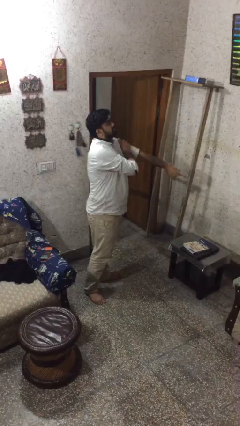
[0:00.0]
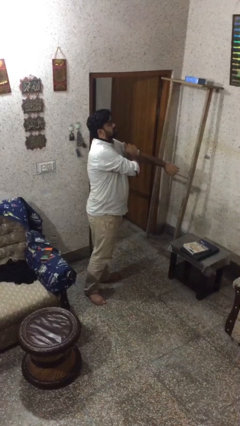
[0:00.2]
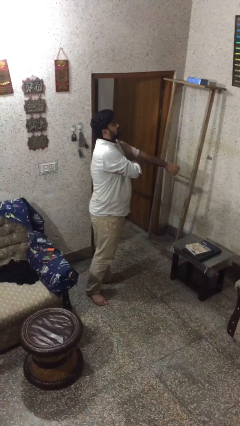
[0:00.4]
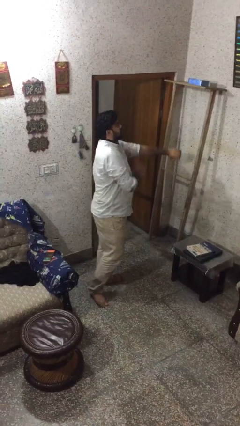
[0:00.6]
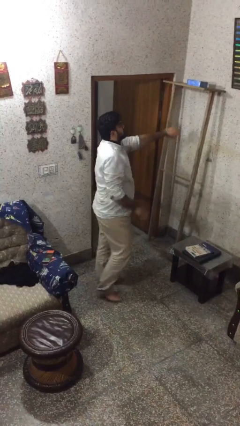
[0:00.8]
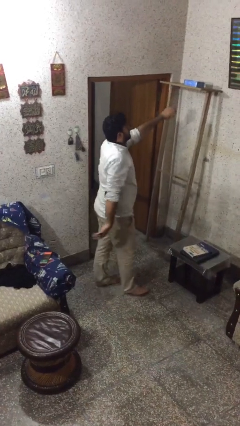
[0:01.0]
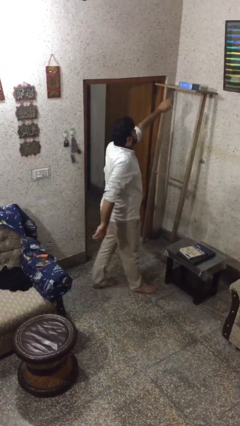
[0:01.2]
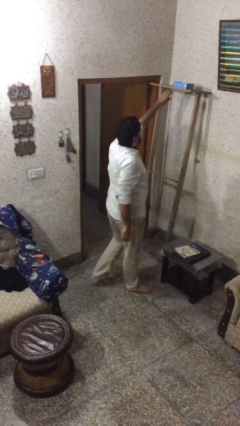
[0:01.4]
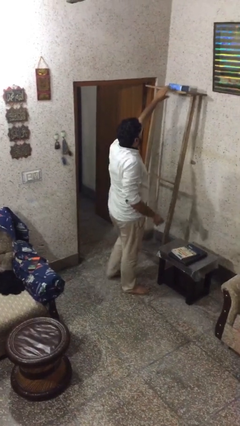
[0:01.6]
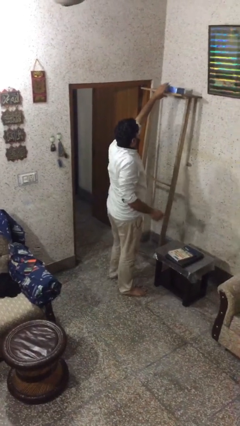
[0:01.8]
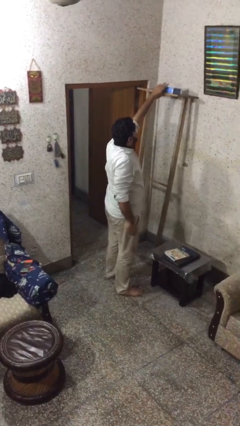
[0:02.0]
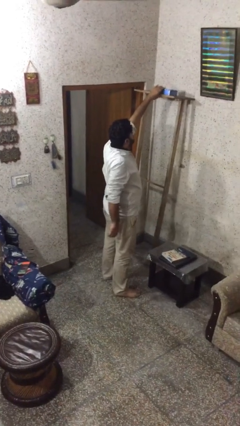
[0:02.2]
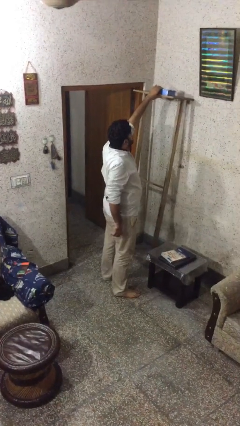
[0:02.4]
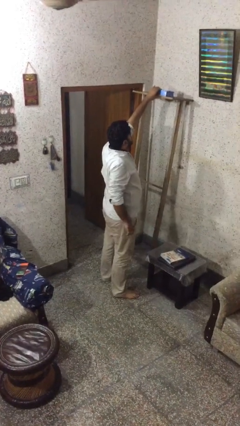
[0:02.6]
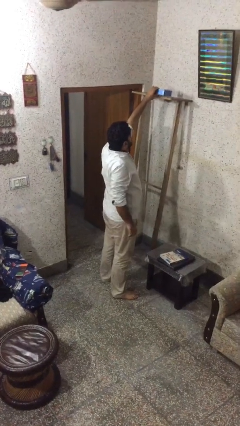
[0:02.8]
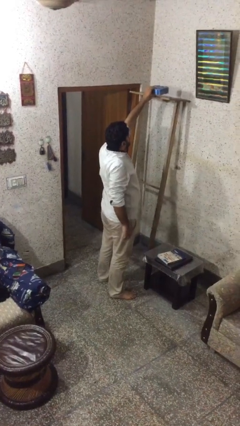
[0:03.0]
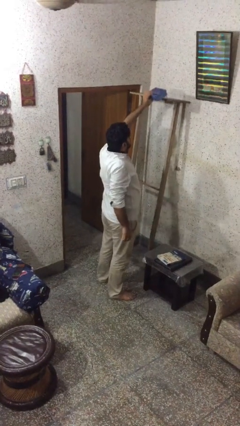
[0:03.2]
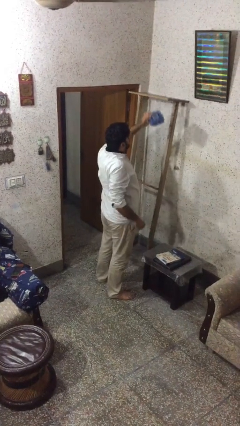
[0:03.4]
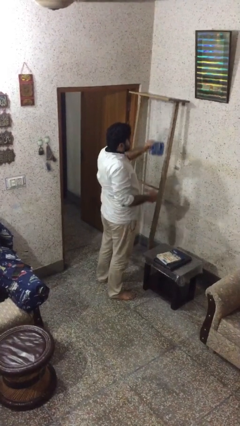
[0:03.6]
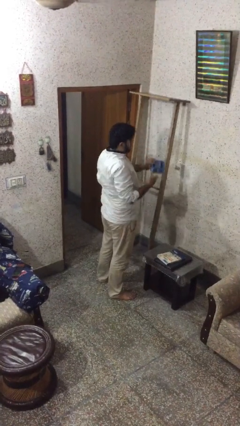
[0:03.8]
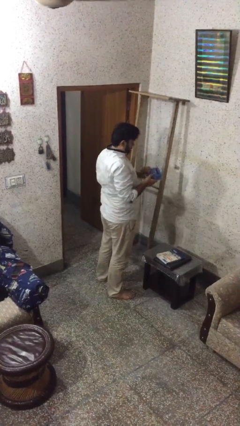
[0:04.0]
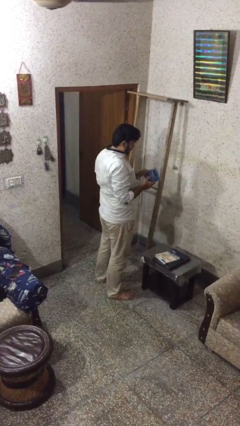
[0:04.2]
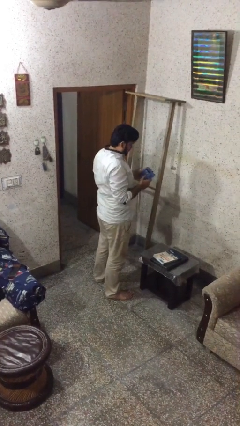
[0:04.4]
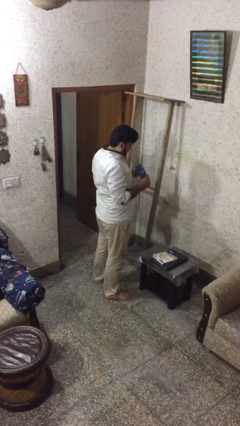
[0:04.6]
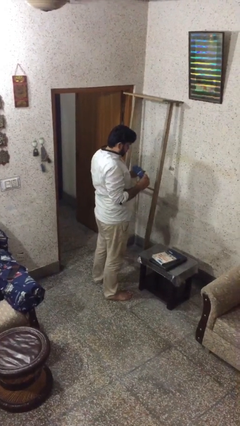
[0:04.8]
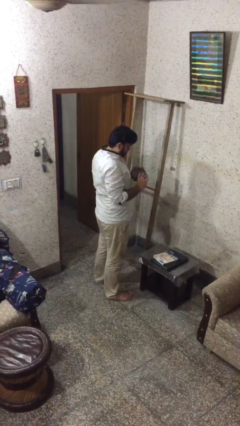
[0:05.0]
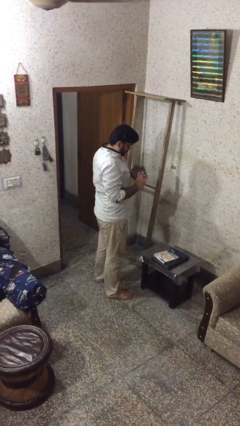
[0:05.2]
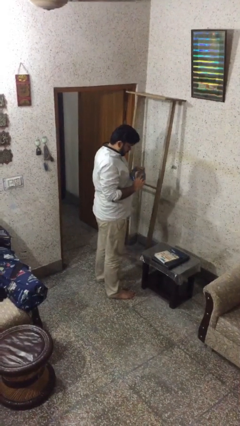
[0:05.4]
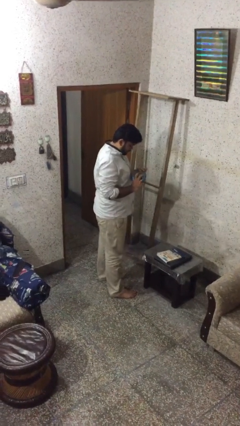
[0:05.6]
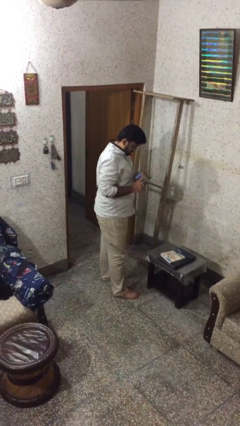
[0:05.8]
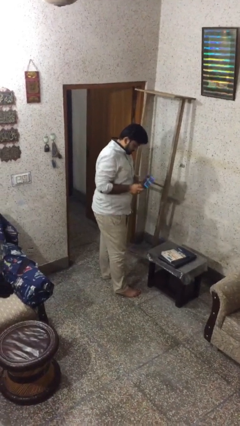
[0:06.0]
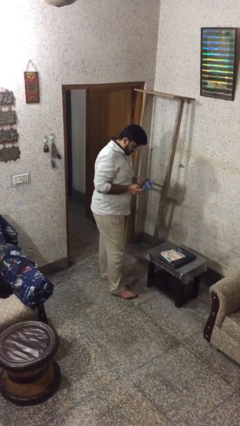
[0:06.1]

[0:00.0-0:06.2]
person picks up object from shelf

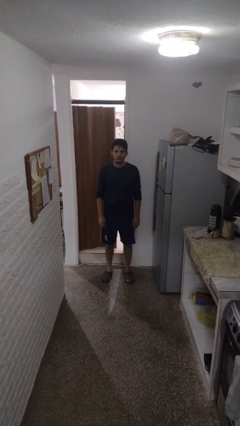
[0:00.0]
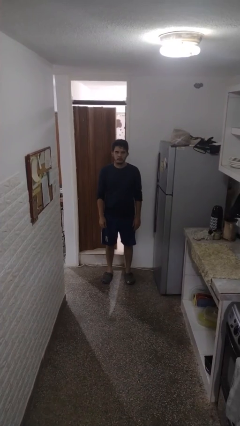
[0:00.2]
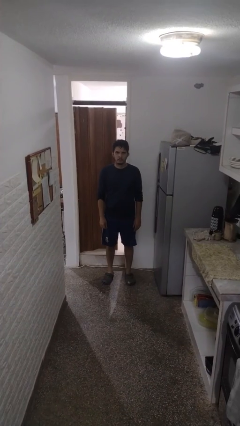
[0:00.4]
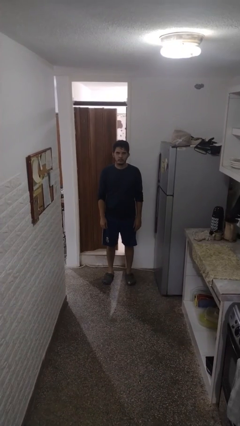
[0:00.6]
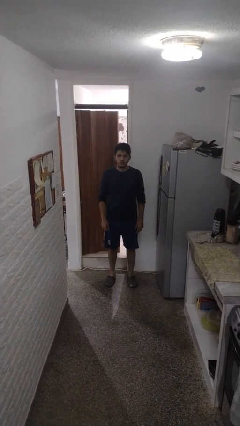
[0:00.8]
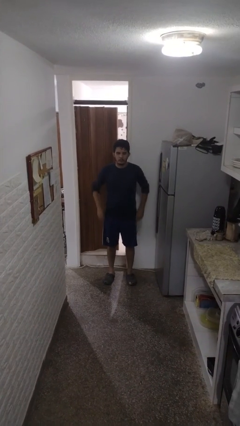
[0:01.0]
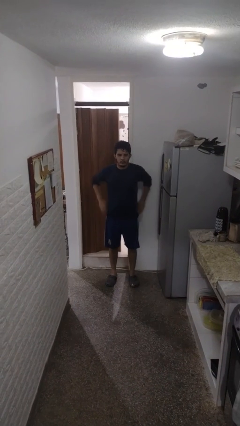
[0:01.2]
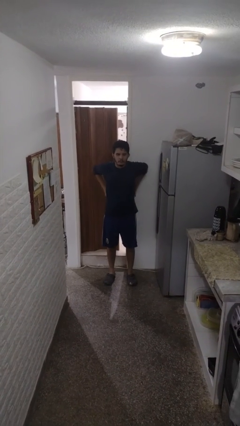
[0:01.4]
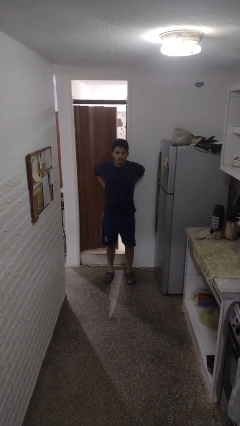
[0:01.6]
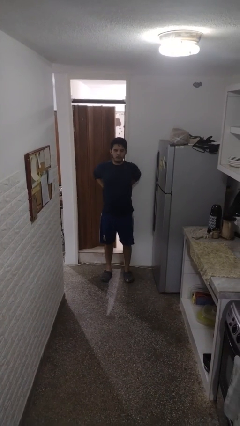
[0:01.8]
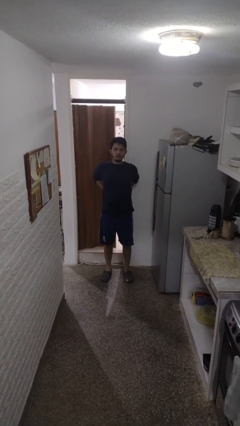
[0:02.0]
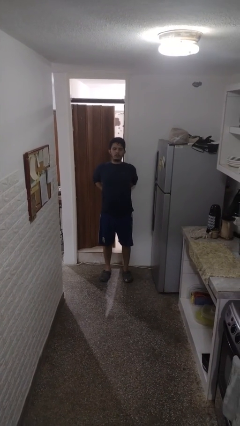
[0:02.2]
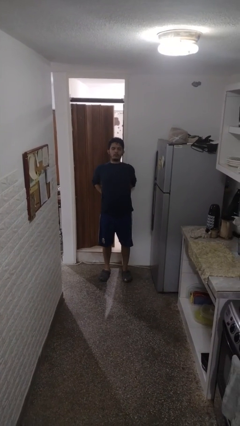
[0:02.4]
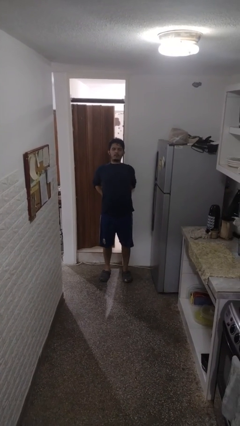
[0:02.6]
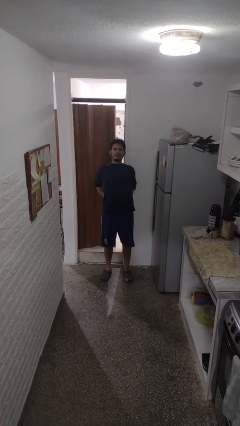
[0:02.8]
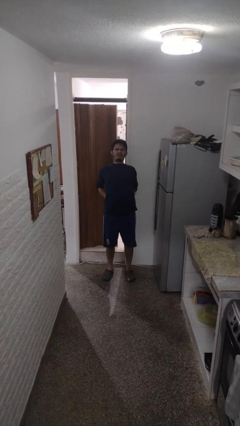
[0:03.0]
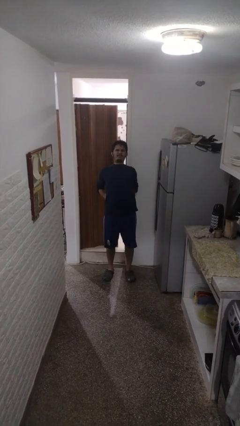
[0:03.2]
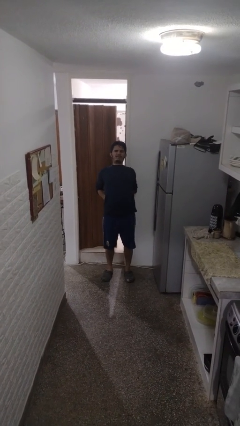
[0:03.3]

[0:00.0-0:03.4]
person stretches back

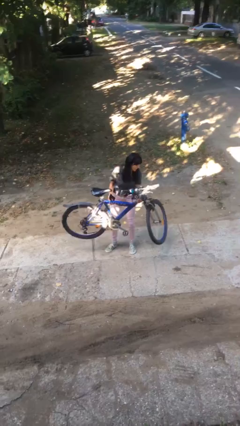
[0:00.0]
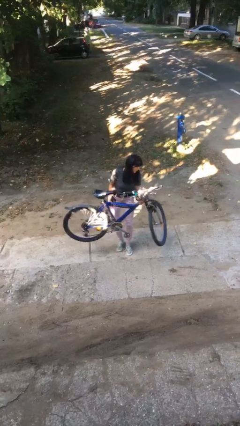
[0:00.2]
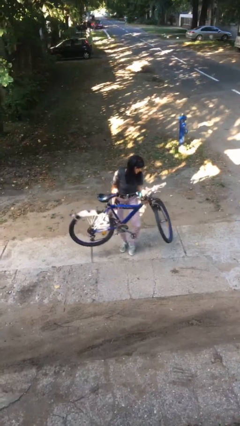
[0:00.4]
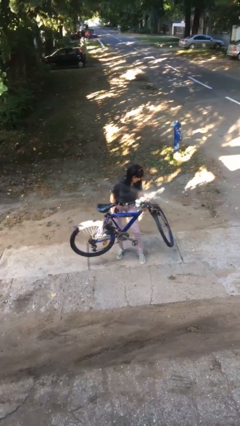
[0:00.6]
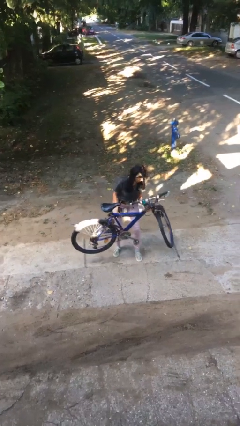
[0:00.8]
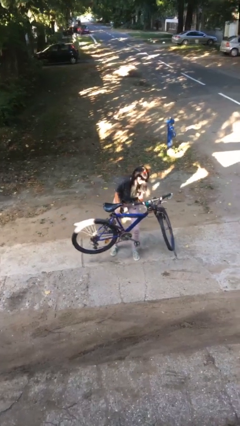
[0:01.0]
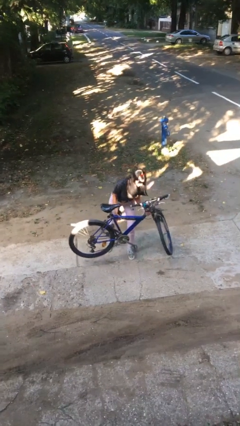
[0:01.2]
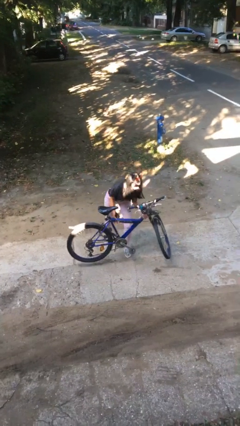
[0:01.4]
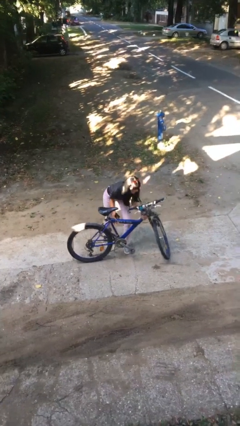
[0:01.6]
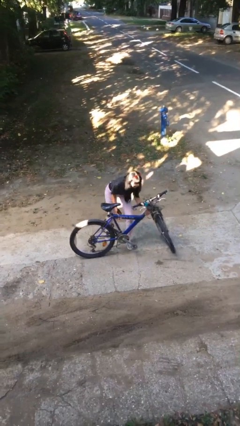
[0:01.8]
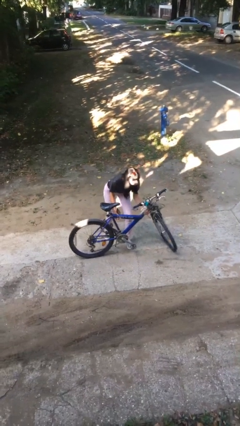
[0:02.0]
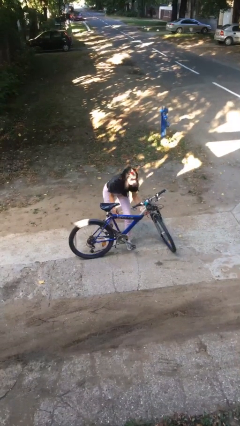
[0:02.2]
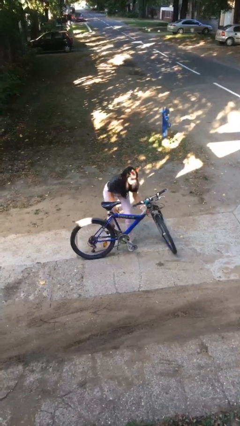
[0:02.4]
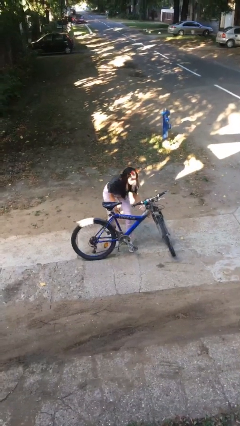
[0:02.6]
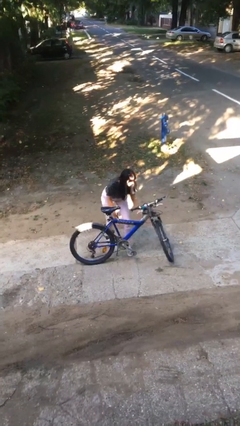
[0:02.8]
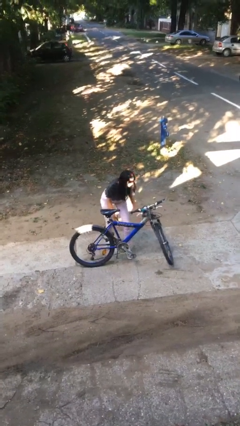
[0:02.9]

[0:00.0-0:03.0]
person puts down object on floor

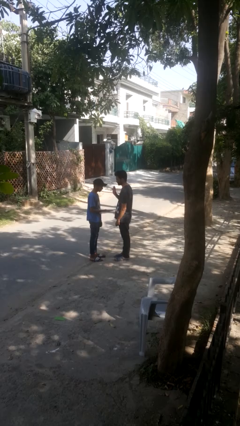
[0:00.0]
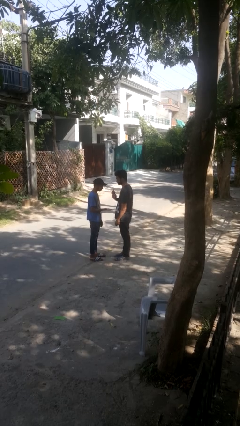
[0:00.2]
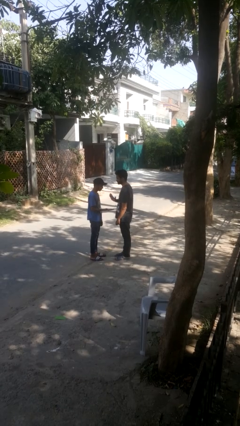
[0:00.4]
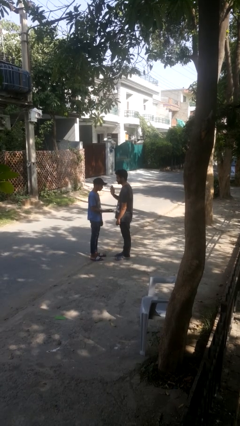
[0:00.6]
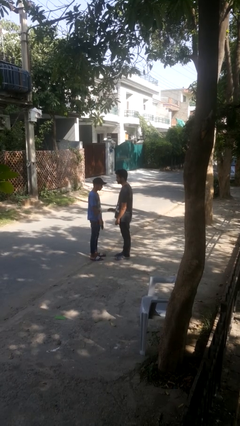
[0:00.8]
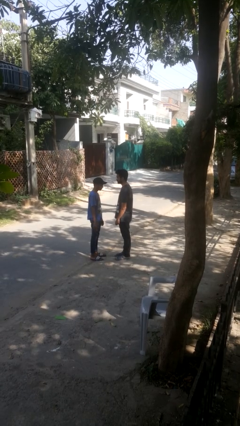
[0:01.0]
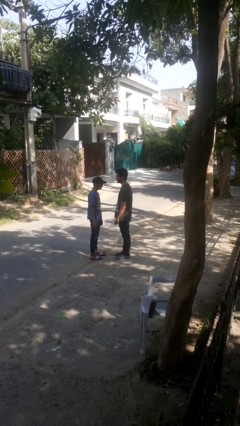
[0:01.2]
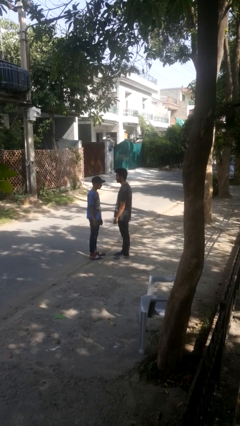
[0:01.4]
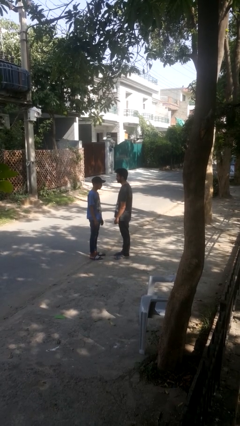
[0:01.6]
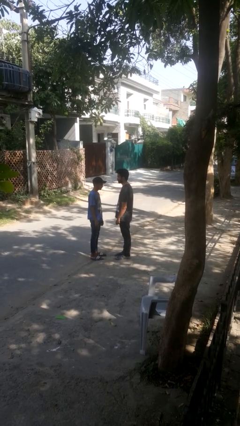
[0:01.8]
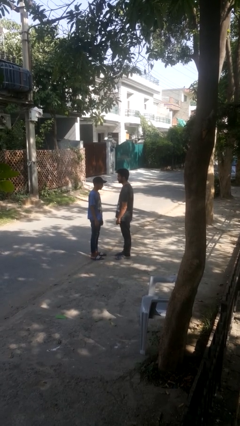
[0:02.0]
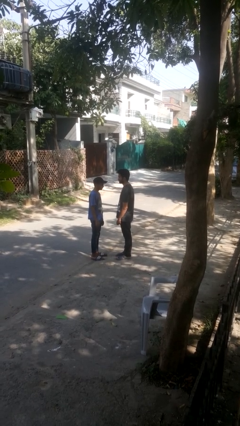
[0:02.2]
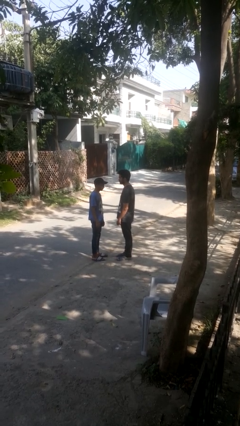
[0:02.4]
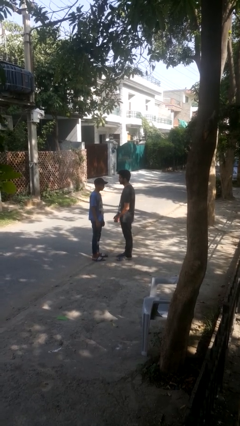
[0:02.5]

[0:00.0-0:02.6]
person highfives hand

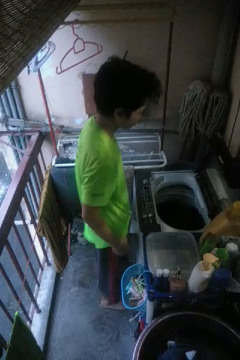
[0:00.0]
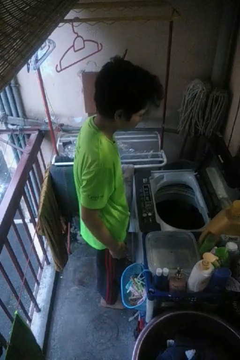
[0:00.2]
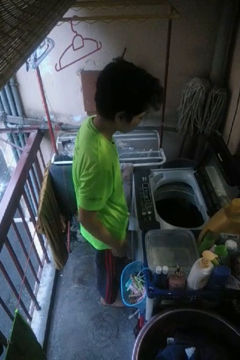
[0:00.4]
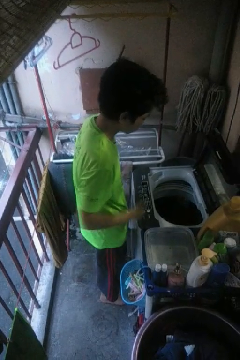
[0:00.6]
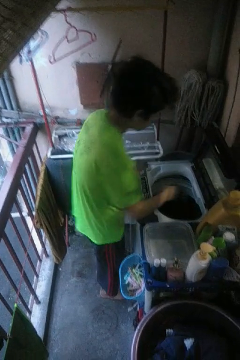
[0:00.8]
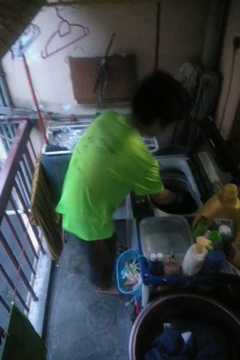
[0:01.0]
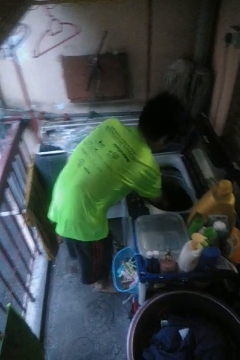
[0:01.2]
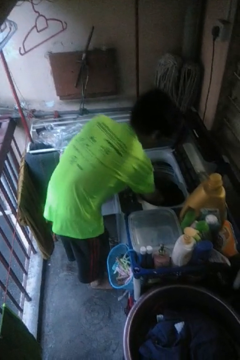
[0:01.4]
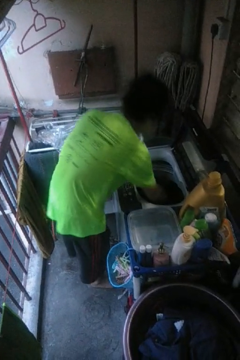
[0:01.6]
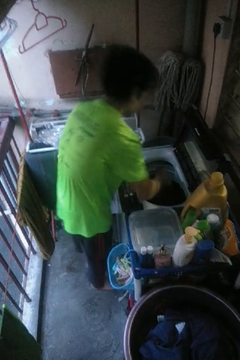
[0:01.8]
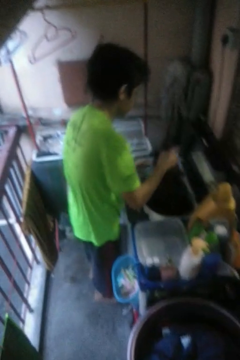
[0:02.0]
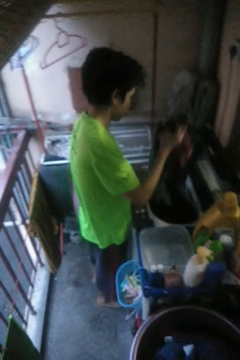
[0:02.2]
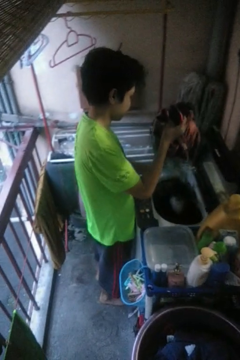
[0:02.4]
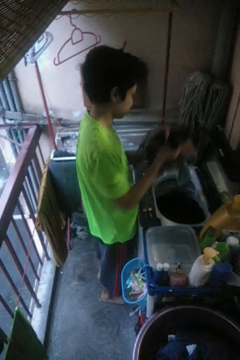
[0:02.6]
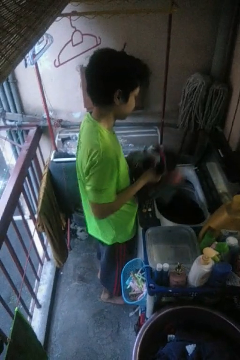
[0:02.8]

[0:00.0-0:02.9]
person unloads clotheswasher
